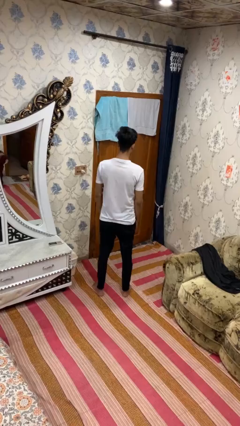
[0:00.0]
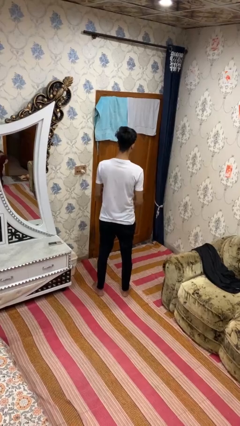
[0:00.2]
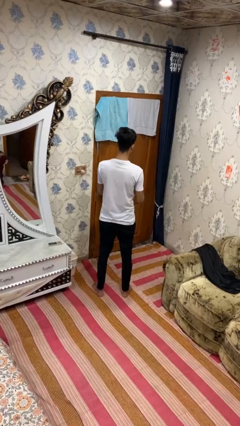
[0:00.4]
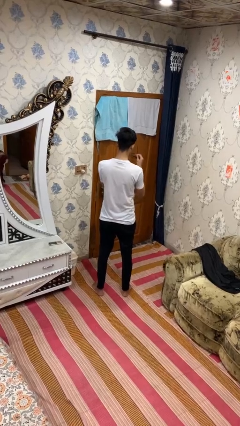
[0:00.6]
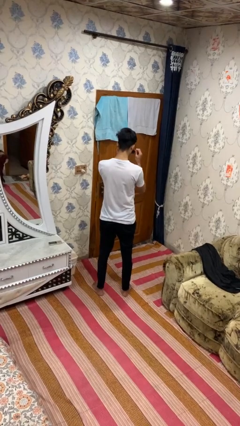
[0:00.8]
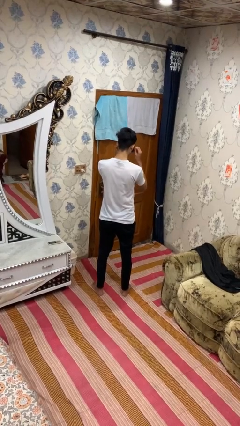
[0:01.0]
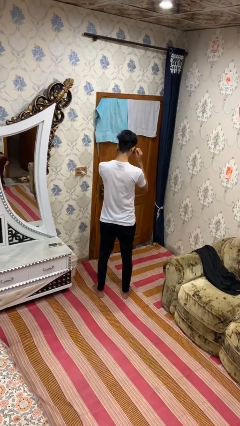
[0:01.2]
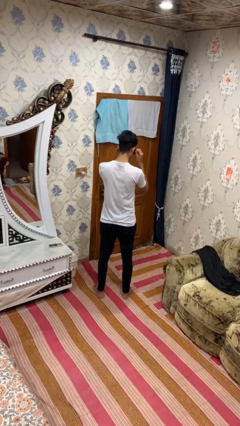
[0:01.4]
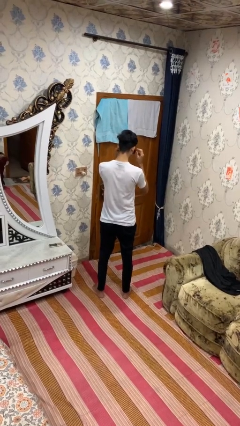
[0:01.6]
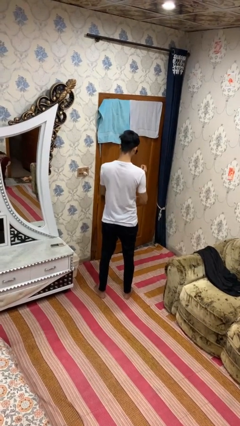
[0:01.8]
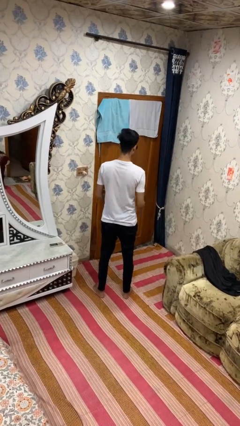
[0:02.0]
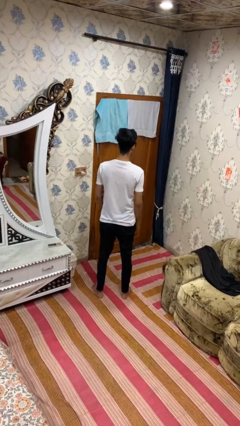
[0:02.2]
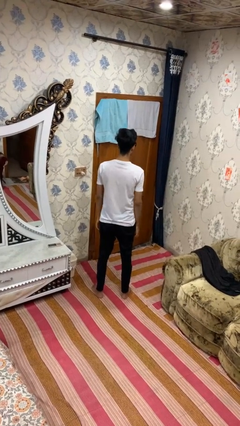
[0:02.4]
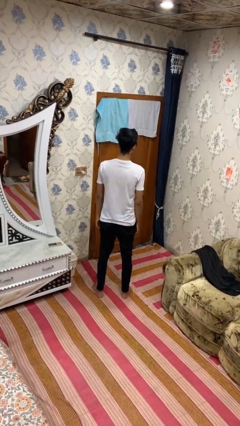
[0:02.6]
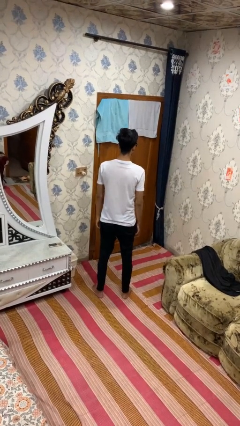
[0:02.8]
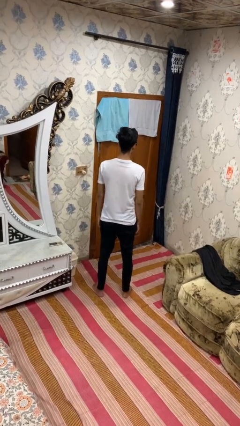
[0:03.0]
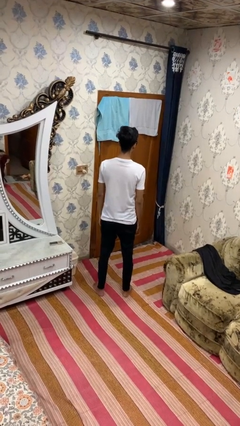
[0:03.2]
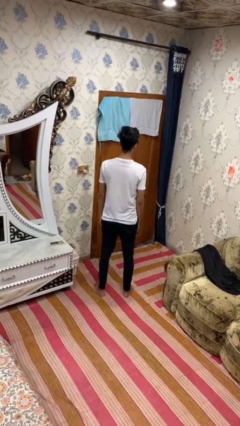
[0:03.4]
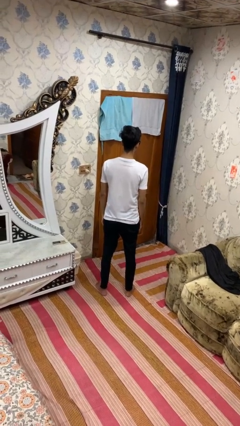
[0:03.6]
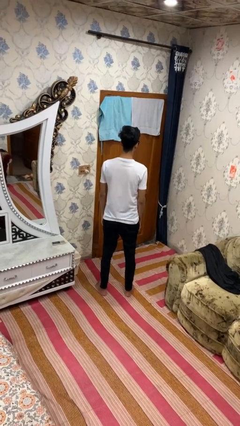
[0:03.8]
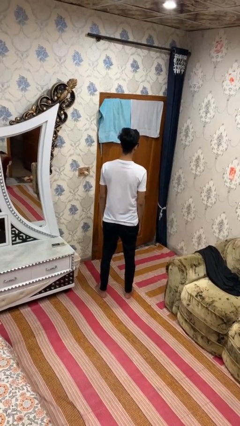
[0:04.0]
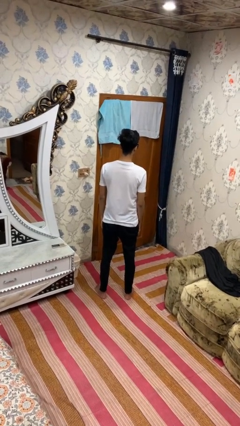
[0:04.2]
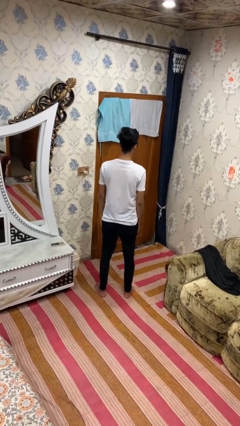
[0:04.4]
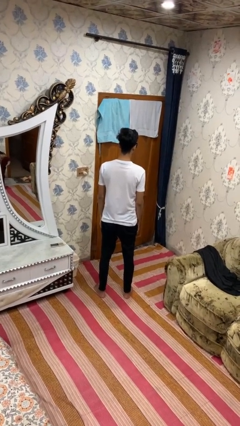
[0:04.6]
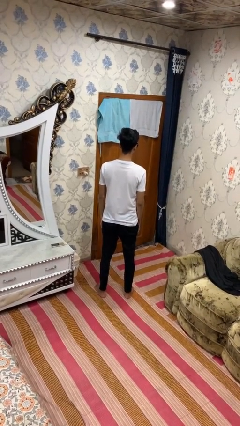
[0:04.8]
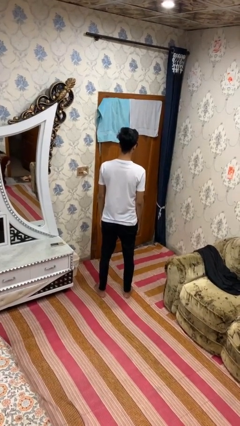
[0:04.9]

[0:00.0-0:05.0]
person puts on sunglasses

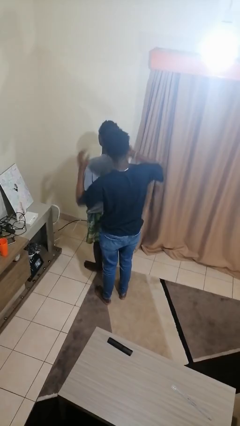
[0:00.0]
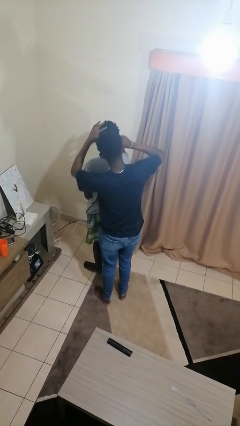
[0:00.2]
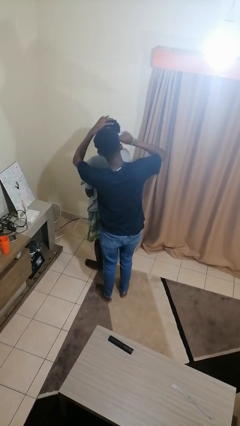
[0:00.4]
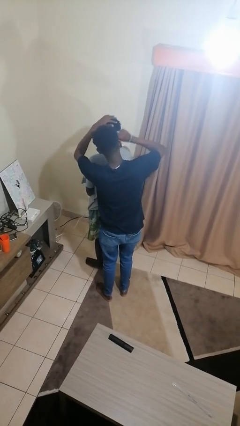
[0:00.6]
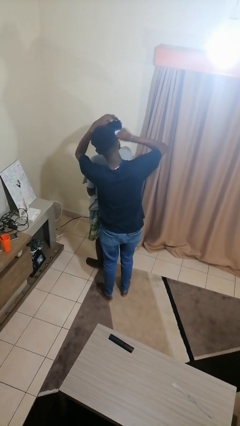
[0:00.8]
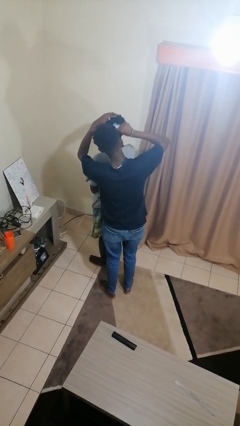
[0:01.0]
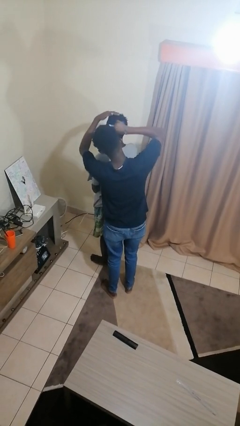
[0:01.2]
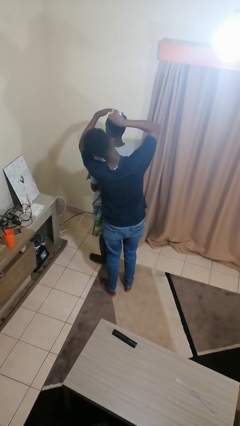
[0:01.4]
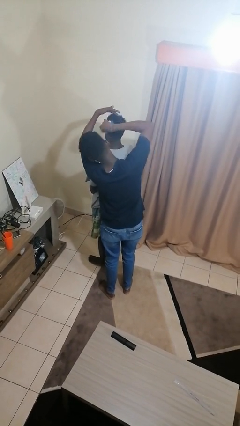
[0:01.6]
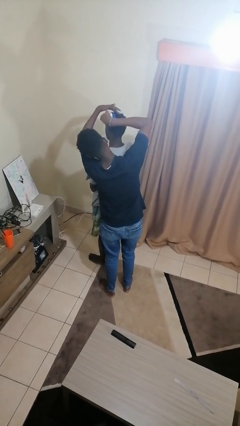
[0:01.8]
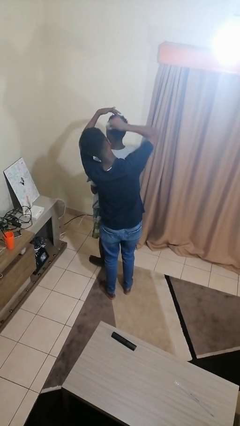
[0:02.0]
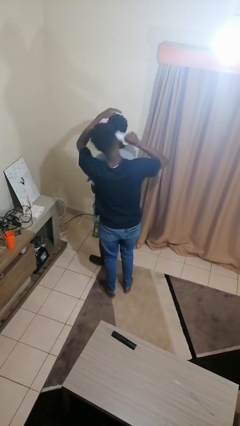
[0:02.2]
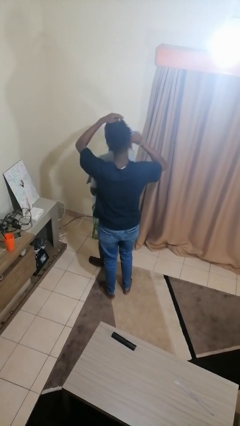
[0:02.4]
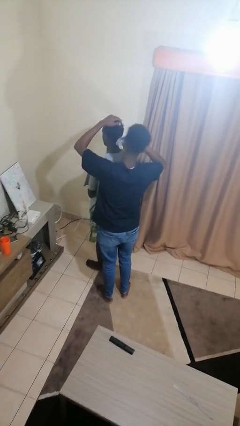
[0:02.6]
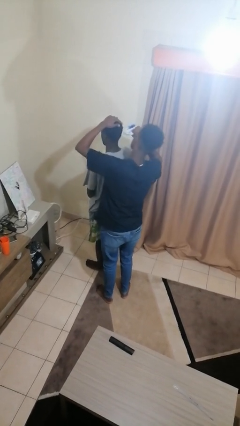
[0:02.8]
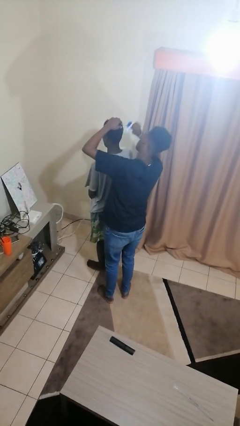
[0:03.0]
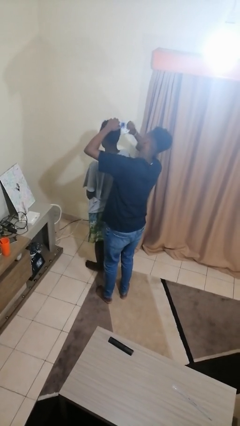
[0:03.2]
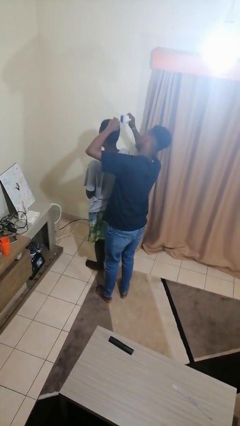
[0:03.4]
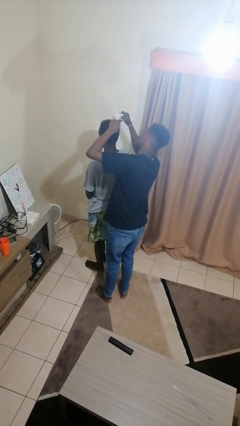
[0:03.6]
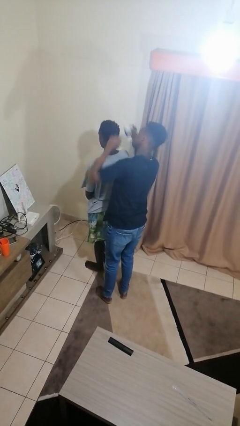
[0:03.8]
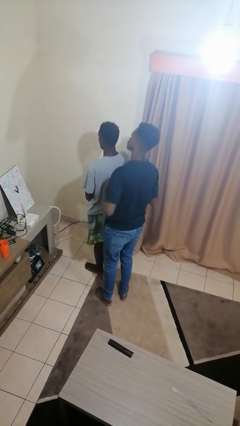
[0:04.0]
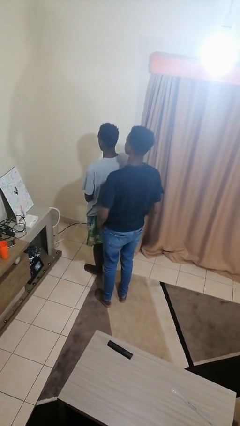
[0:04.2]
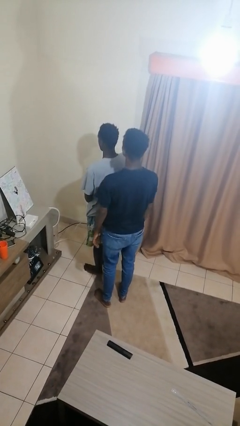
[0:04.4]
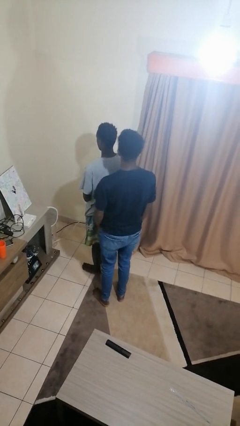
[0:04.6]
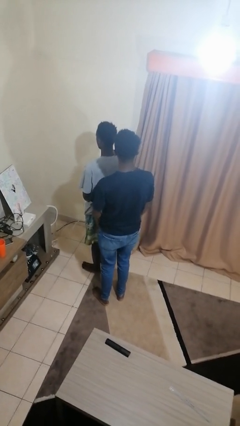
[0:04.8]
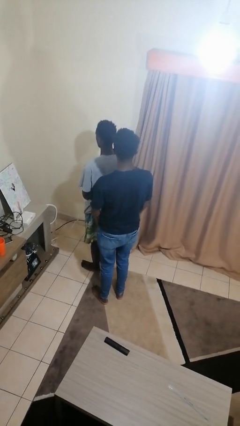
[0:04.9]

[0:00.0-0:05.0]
person brushes hair of person

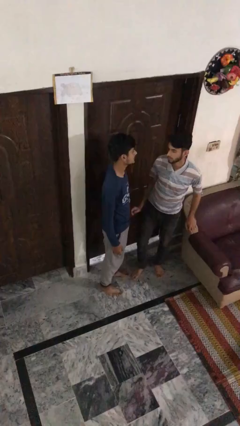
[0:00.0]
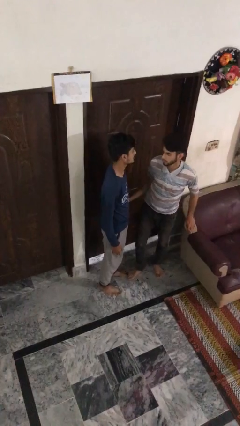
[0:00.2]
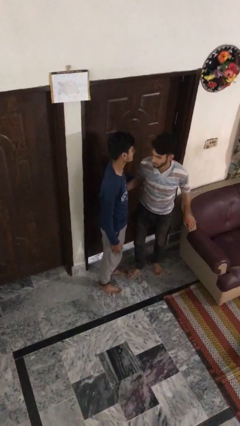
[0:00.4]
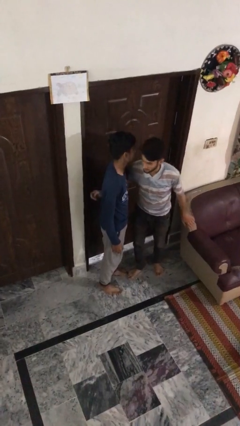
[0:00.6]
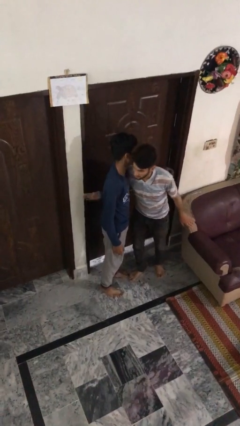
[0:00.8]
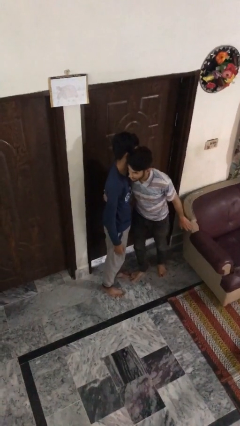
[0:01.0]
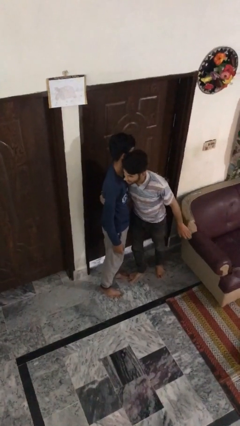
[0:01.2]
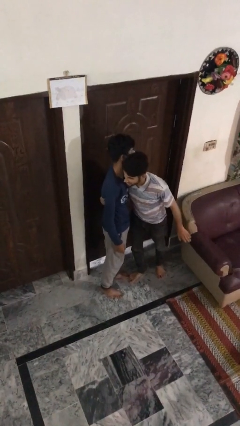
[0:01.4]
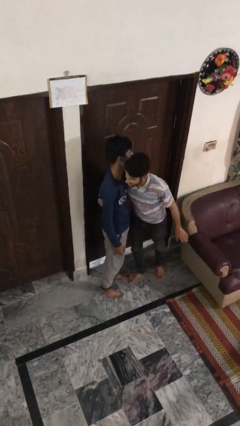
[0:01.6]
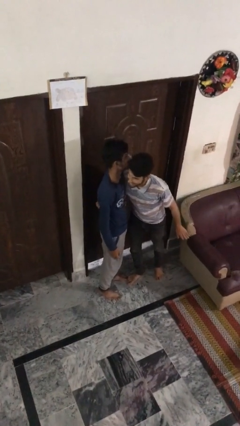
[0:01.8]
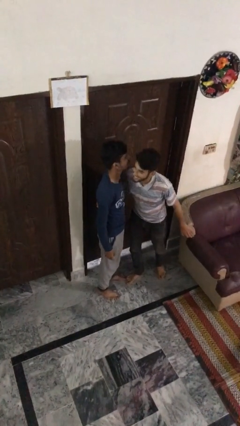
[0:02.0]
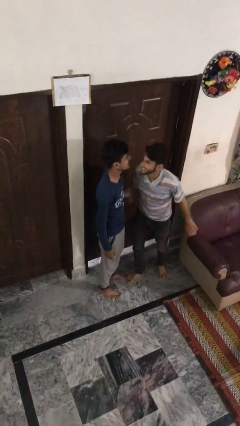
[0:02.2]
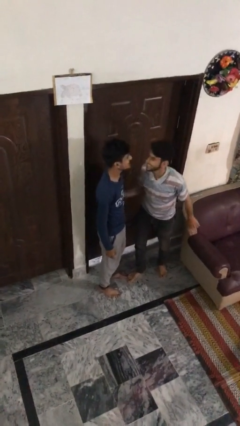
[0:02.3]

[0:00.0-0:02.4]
person embraces person

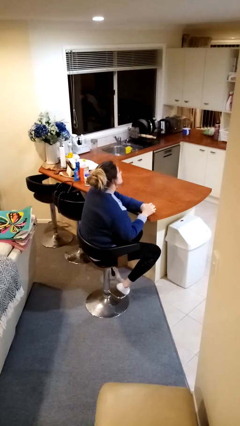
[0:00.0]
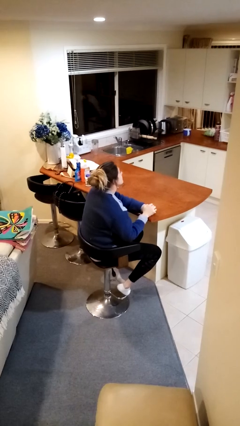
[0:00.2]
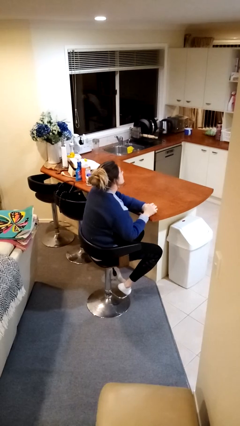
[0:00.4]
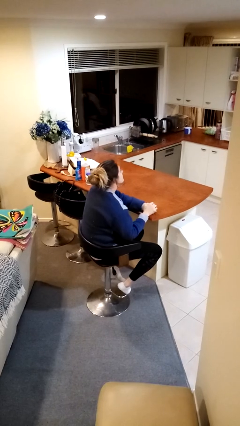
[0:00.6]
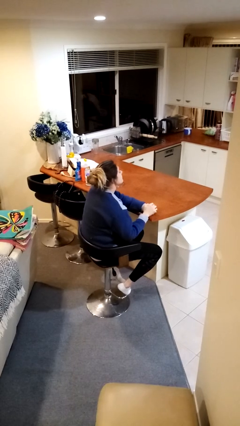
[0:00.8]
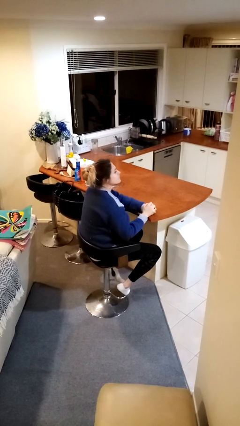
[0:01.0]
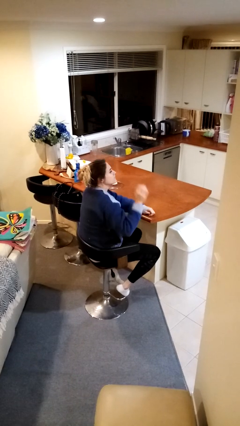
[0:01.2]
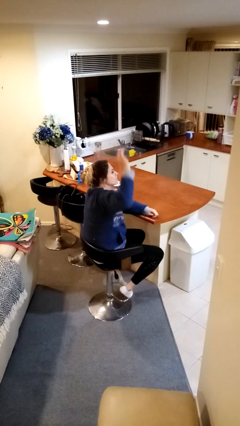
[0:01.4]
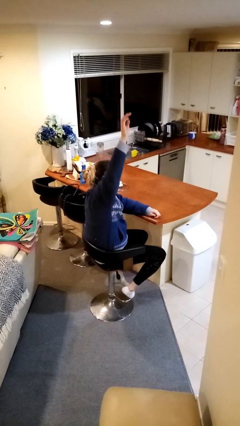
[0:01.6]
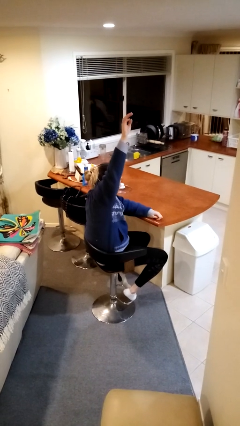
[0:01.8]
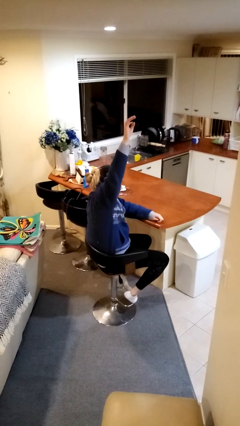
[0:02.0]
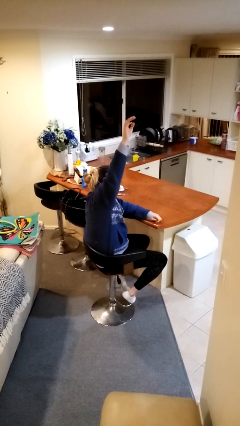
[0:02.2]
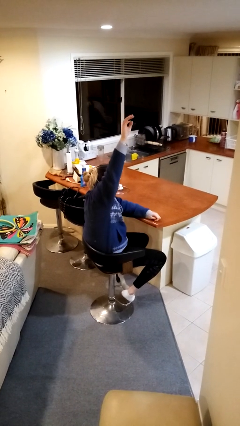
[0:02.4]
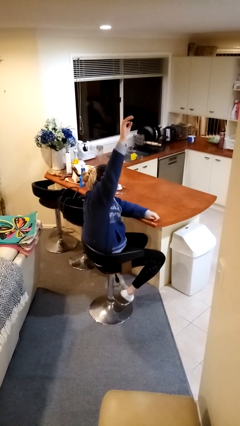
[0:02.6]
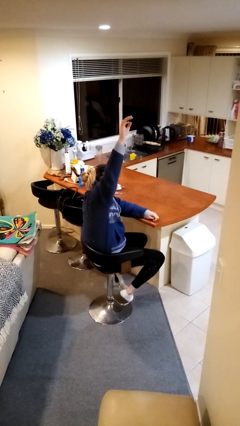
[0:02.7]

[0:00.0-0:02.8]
person gestures raise hand

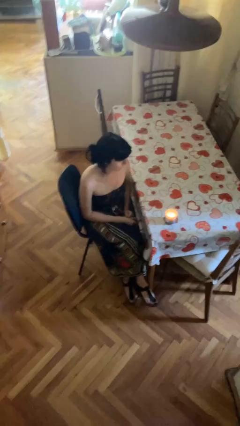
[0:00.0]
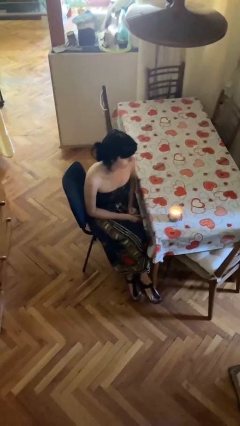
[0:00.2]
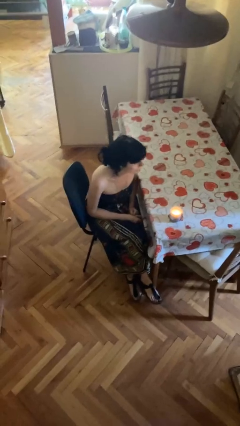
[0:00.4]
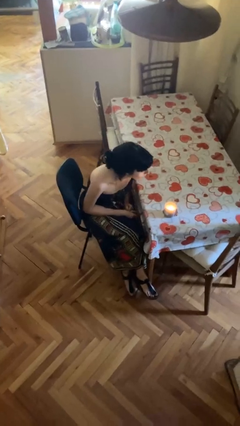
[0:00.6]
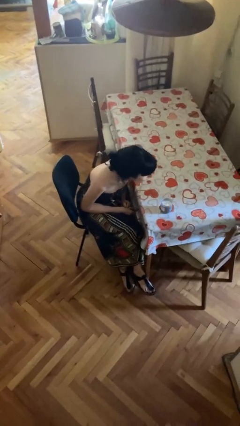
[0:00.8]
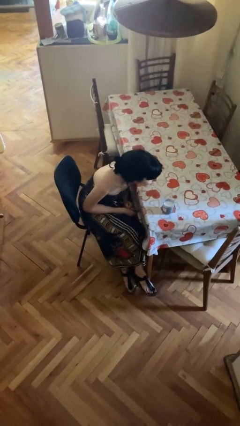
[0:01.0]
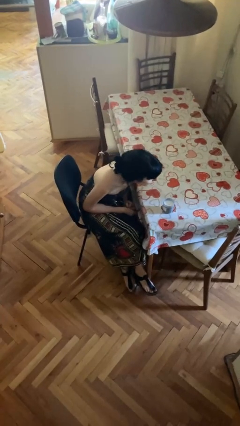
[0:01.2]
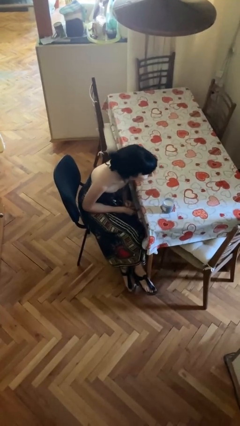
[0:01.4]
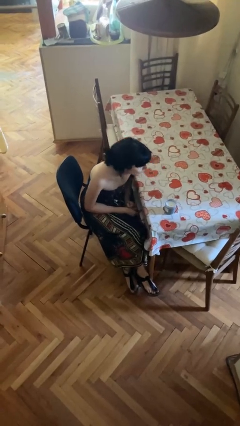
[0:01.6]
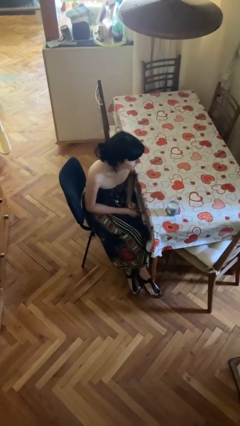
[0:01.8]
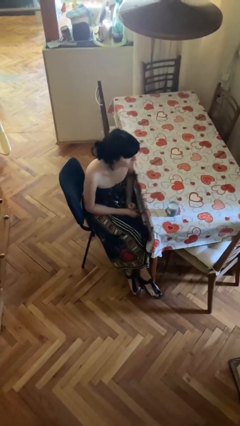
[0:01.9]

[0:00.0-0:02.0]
person extinguishes candle

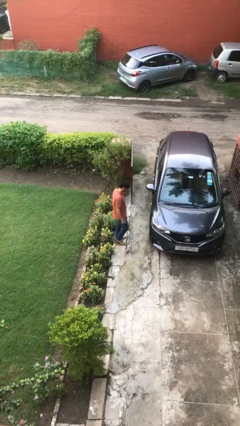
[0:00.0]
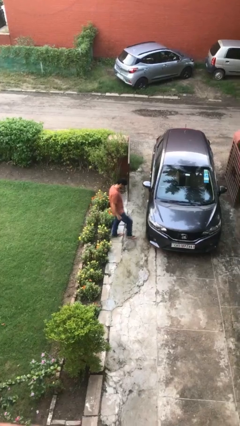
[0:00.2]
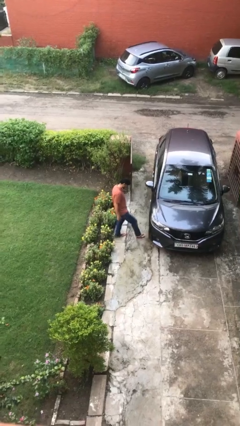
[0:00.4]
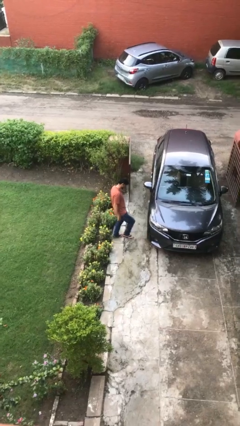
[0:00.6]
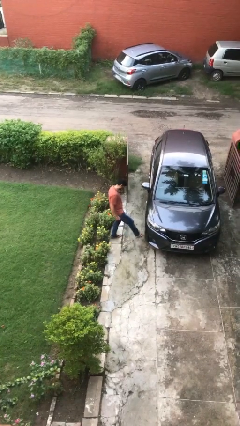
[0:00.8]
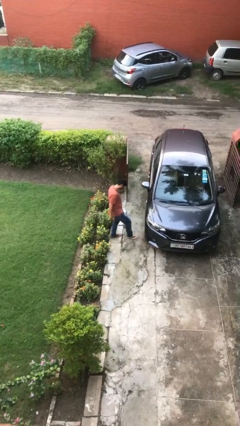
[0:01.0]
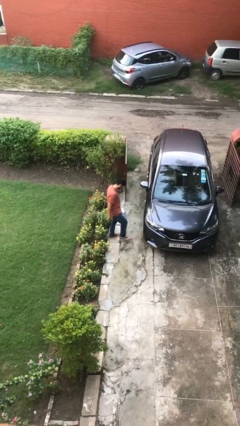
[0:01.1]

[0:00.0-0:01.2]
person kicks car tires
